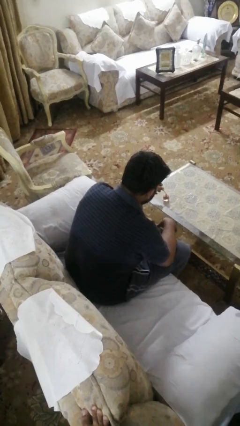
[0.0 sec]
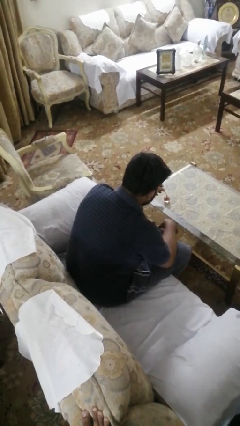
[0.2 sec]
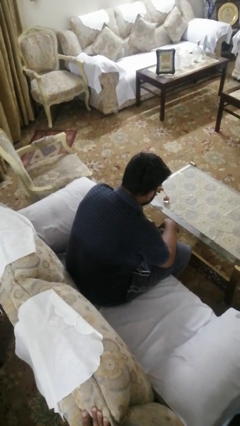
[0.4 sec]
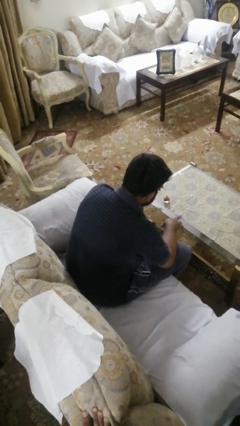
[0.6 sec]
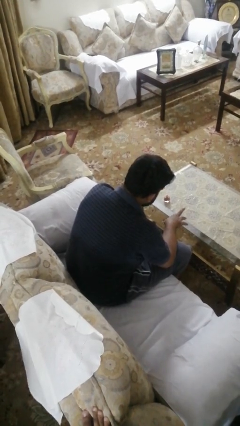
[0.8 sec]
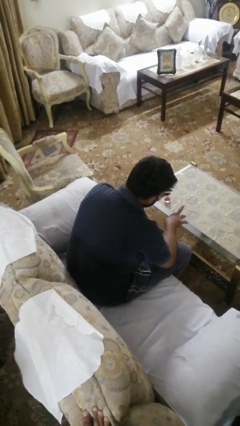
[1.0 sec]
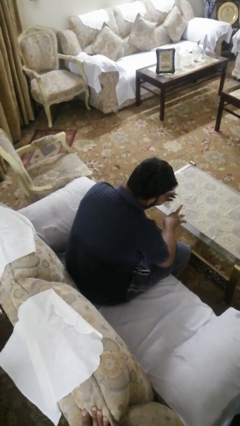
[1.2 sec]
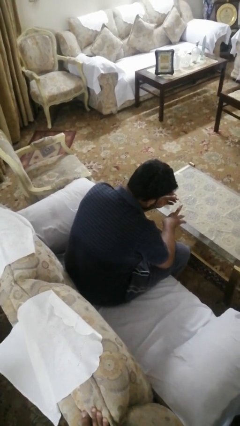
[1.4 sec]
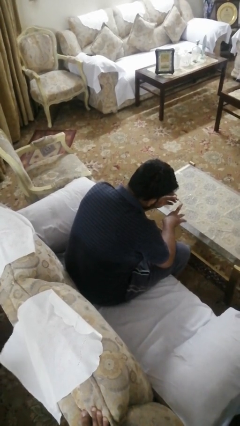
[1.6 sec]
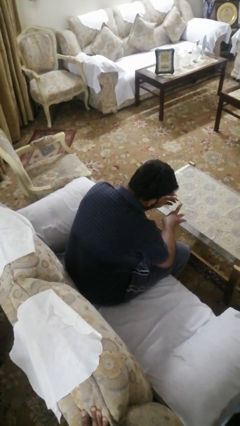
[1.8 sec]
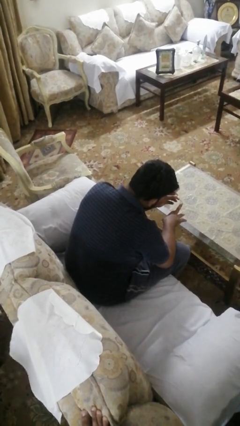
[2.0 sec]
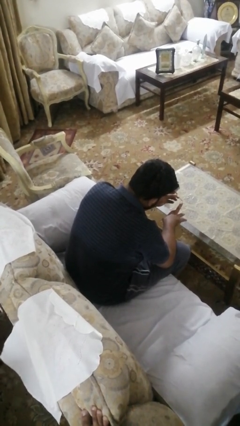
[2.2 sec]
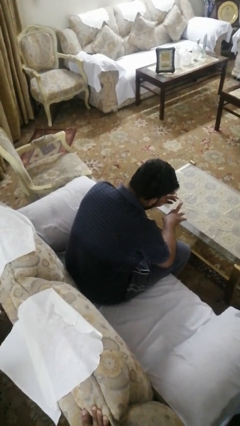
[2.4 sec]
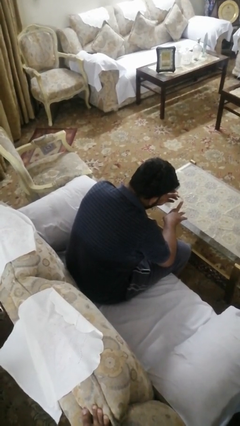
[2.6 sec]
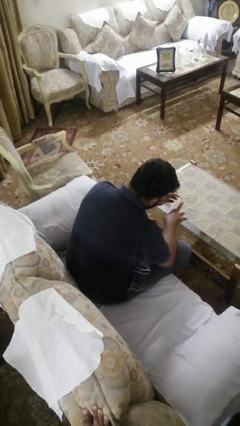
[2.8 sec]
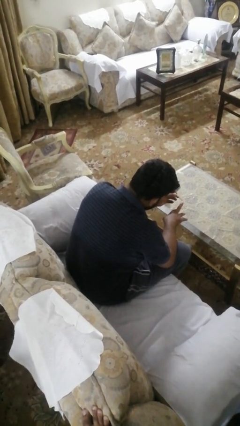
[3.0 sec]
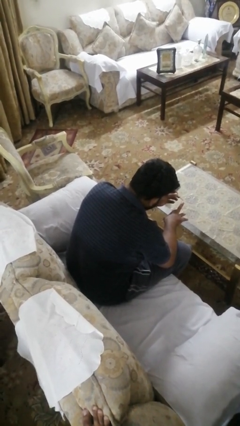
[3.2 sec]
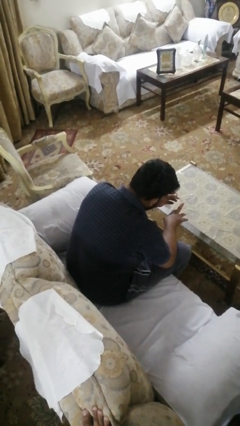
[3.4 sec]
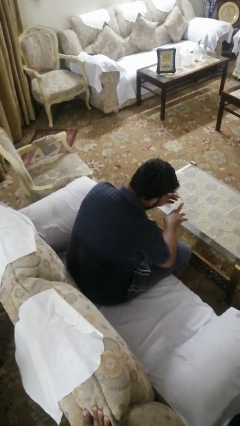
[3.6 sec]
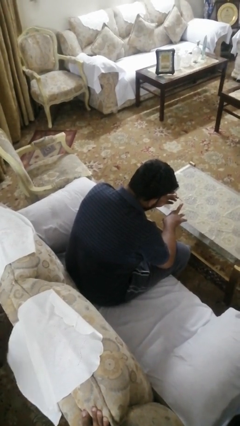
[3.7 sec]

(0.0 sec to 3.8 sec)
person paints fingernails

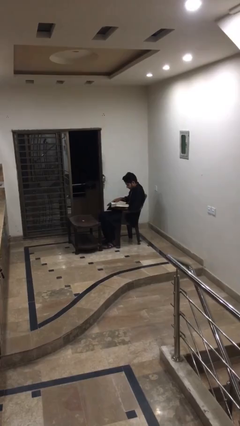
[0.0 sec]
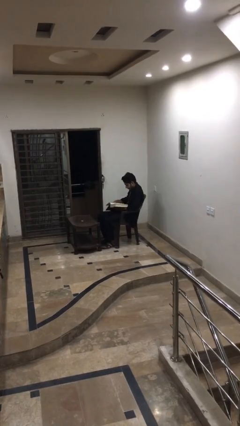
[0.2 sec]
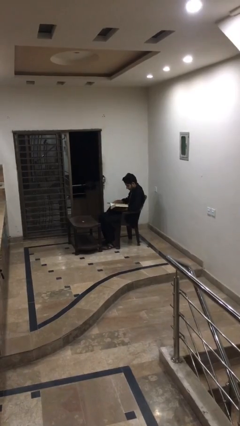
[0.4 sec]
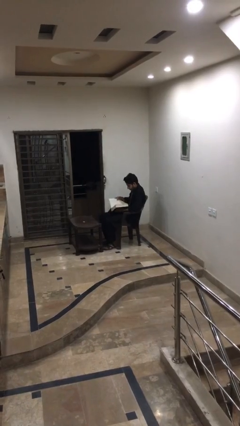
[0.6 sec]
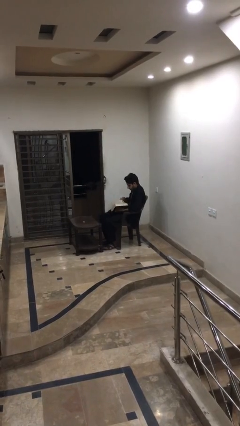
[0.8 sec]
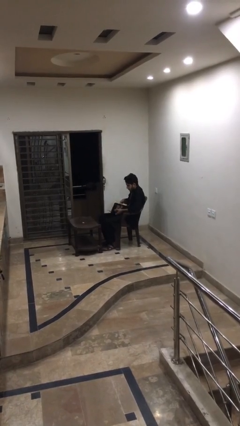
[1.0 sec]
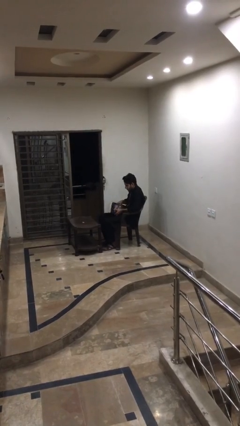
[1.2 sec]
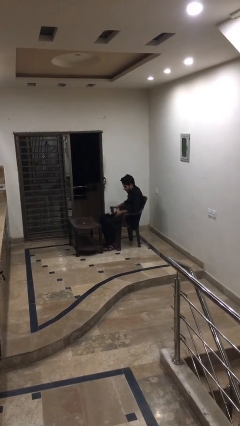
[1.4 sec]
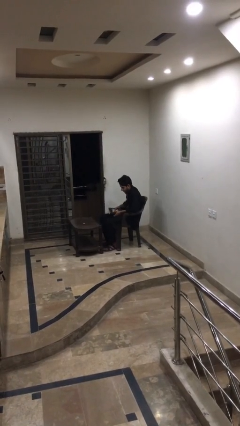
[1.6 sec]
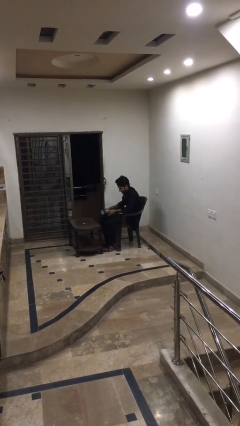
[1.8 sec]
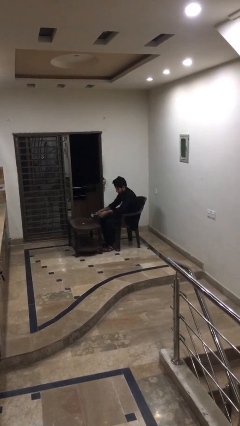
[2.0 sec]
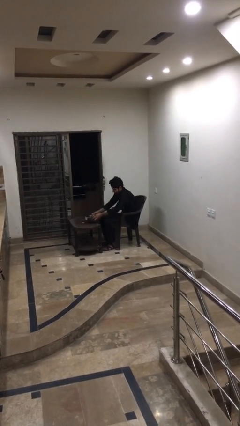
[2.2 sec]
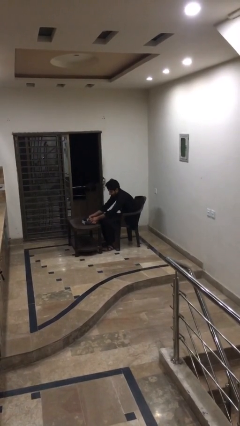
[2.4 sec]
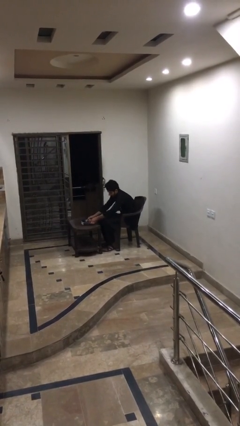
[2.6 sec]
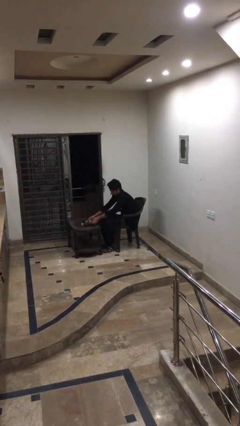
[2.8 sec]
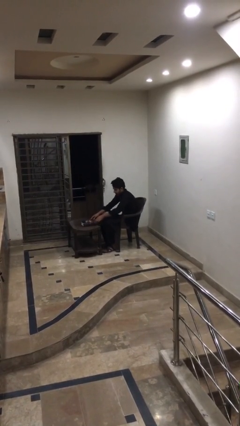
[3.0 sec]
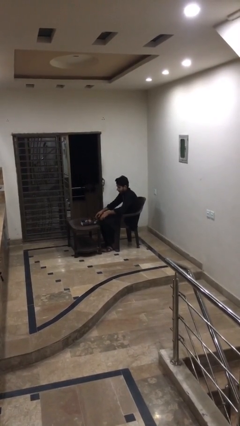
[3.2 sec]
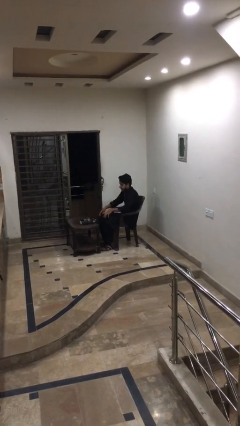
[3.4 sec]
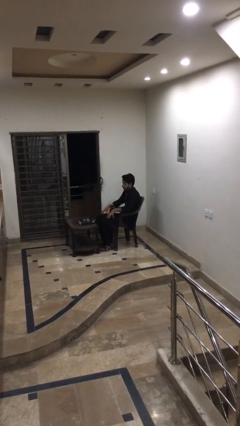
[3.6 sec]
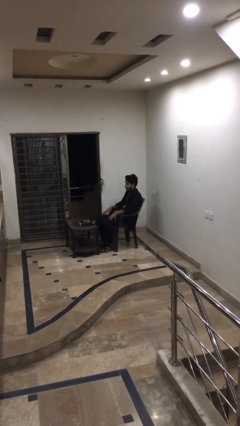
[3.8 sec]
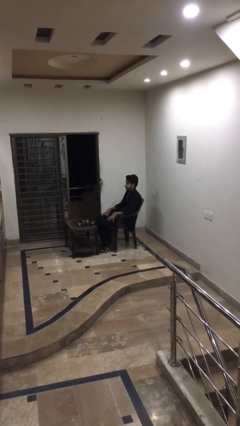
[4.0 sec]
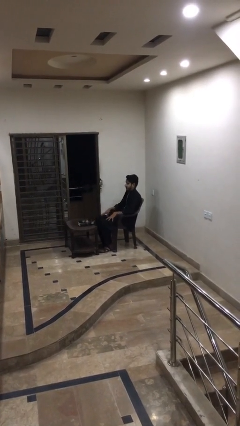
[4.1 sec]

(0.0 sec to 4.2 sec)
person puts down object on table

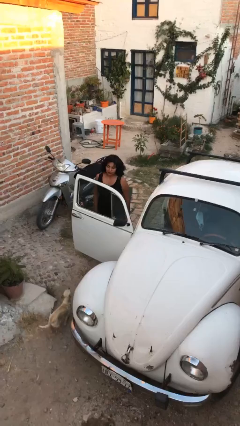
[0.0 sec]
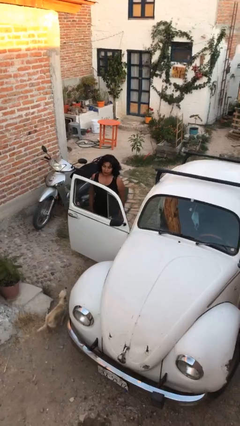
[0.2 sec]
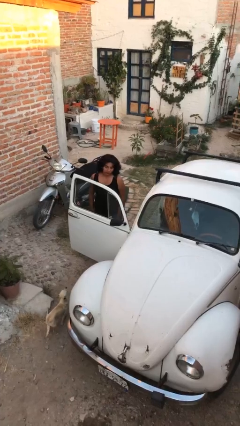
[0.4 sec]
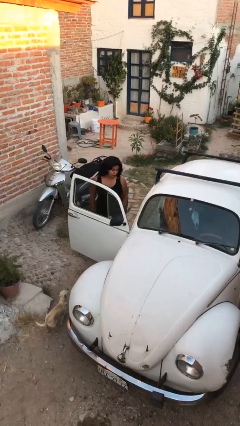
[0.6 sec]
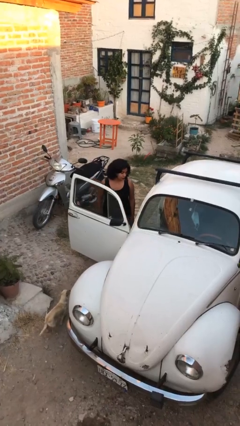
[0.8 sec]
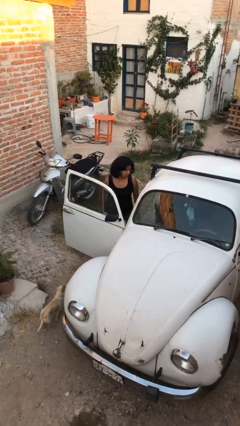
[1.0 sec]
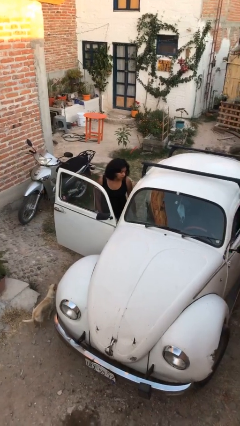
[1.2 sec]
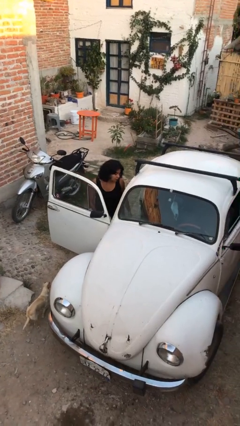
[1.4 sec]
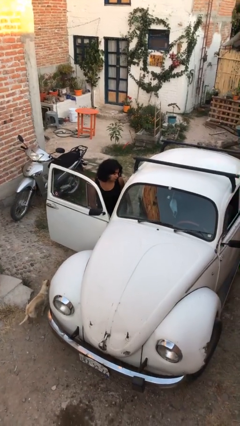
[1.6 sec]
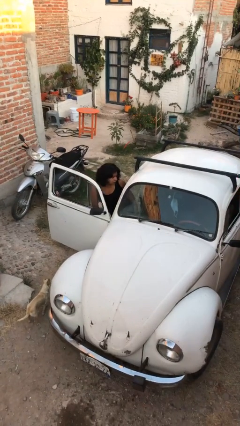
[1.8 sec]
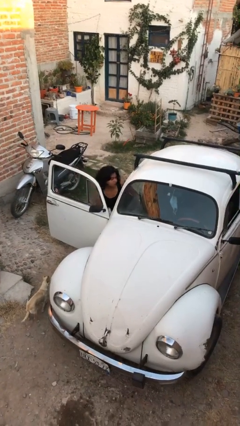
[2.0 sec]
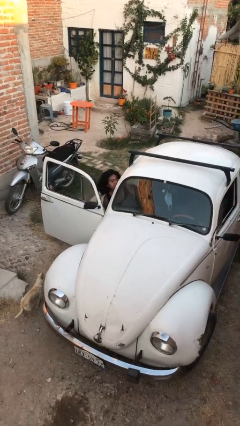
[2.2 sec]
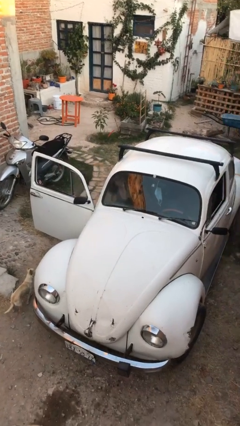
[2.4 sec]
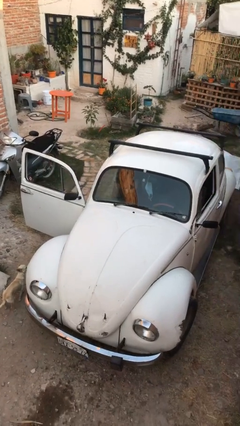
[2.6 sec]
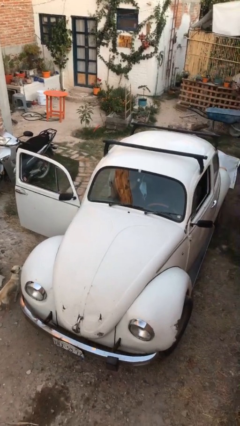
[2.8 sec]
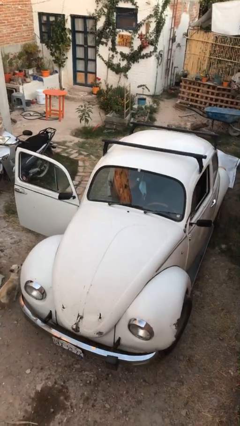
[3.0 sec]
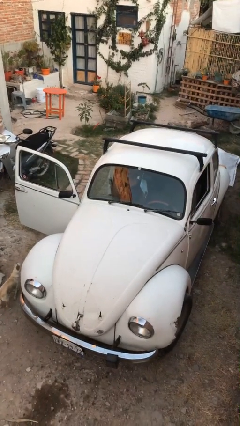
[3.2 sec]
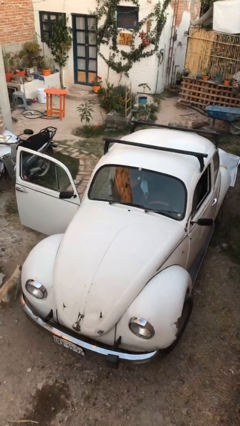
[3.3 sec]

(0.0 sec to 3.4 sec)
person enters car

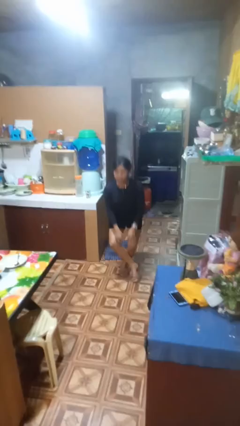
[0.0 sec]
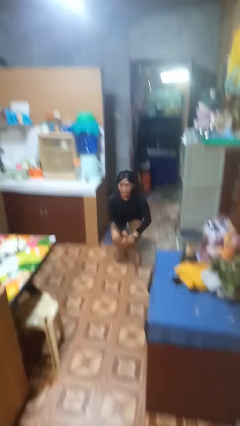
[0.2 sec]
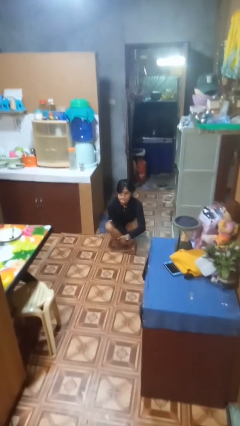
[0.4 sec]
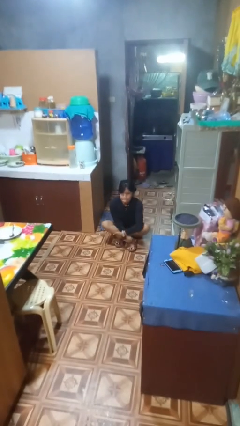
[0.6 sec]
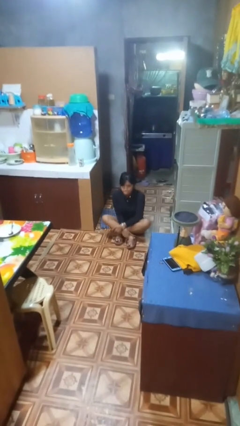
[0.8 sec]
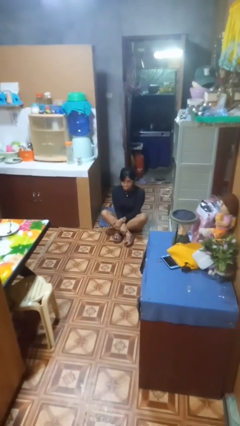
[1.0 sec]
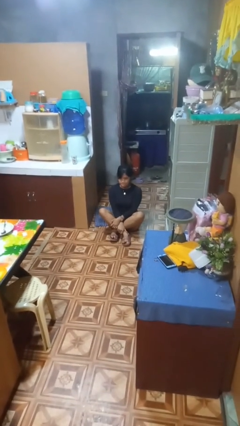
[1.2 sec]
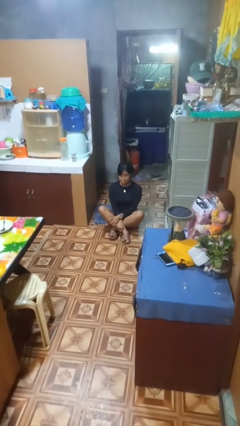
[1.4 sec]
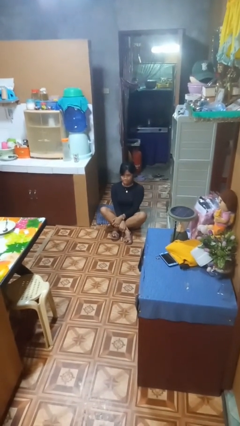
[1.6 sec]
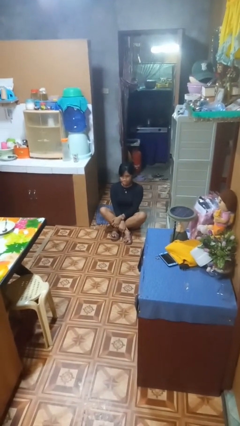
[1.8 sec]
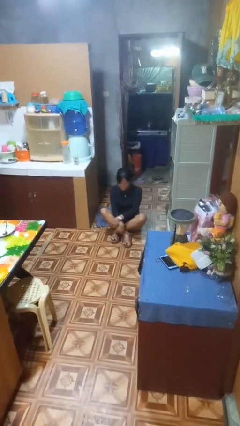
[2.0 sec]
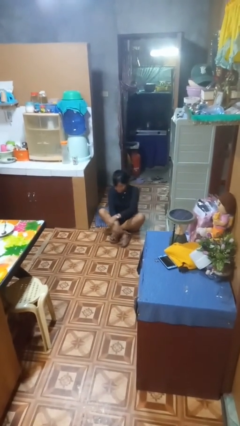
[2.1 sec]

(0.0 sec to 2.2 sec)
person sits crisscross

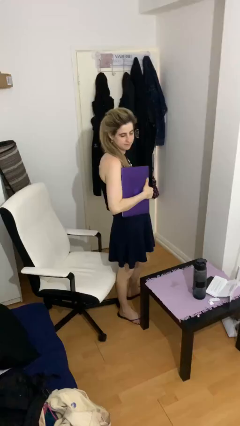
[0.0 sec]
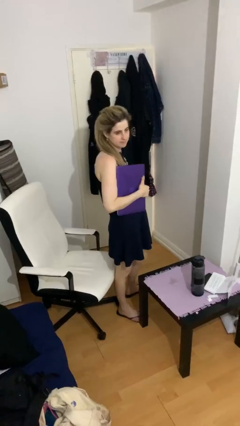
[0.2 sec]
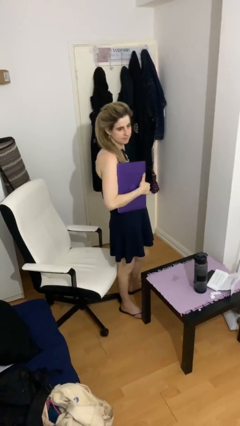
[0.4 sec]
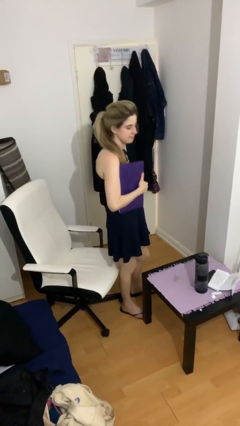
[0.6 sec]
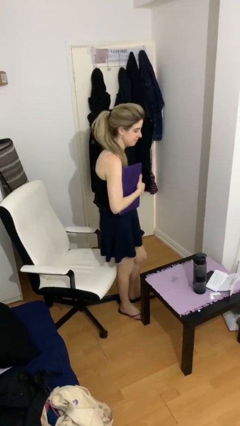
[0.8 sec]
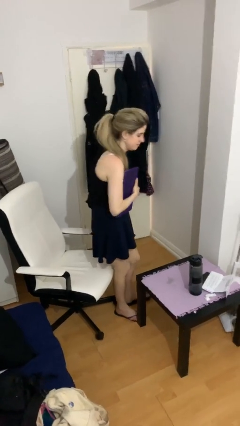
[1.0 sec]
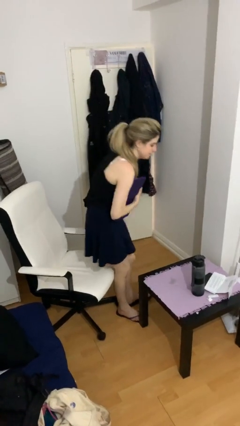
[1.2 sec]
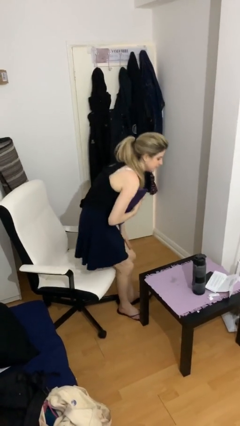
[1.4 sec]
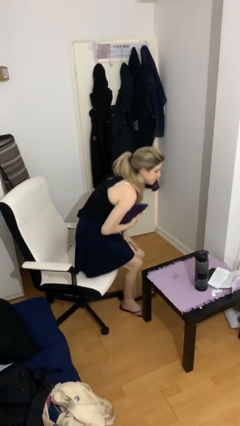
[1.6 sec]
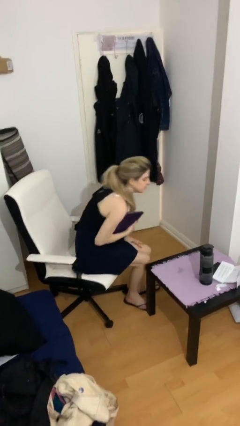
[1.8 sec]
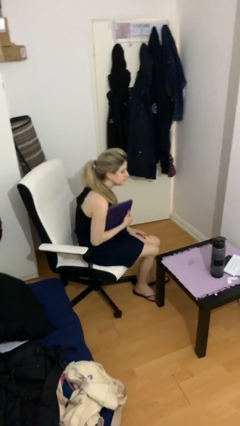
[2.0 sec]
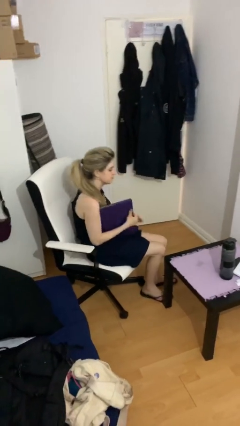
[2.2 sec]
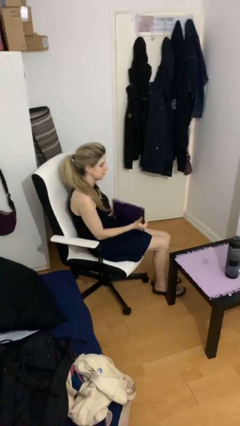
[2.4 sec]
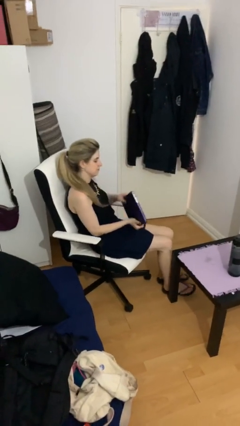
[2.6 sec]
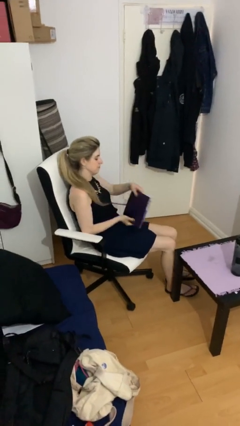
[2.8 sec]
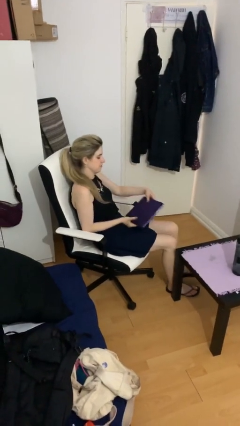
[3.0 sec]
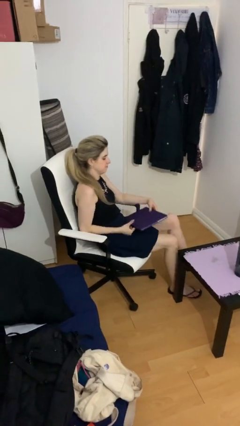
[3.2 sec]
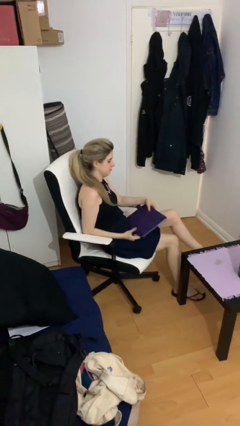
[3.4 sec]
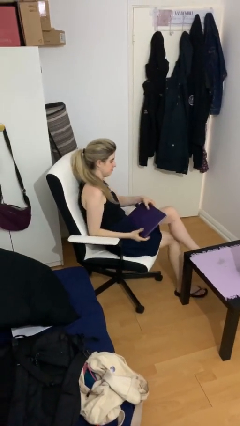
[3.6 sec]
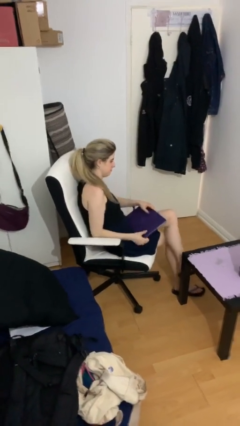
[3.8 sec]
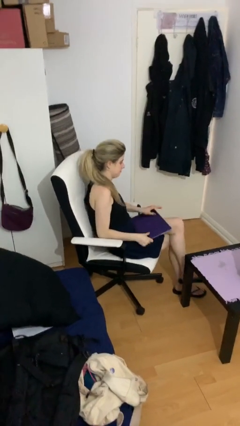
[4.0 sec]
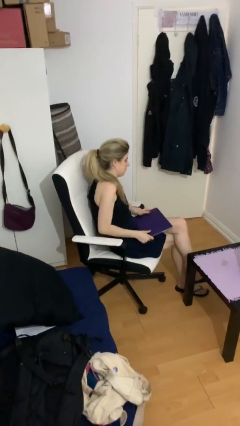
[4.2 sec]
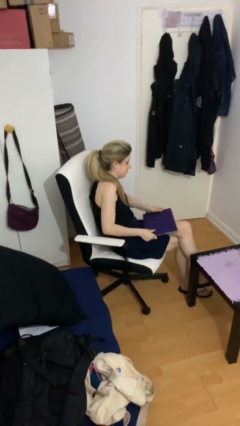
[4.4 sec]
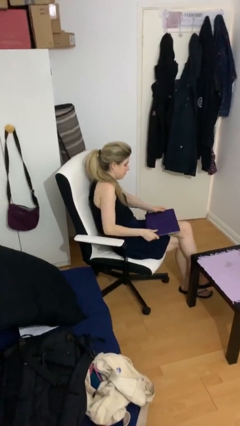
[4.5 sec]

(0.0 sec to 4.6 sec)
person sits down
